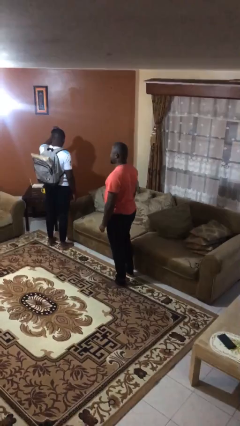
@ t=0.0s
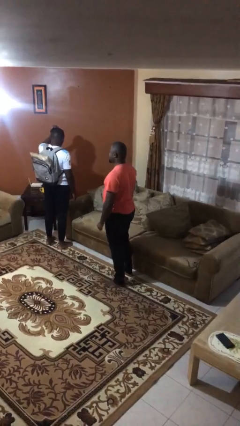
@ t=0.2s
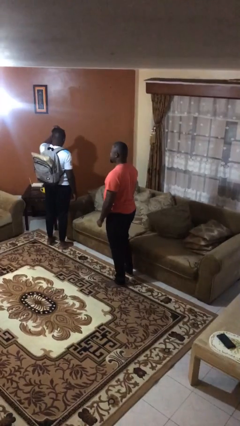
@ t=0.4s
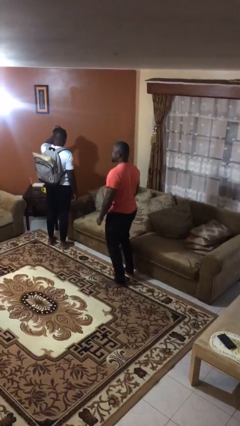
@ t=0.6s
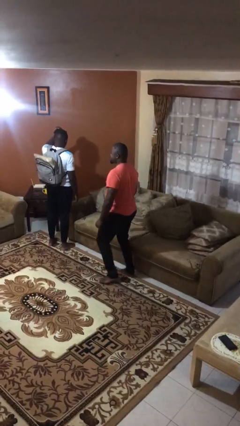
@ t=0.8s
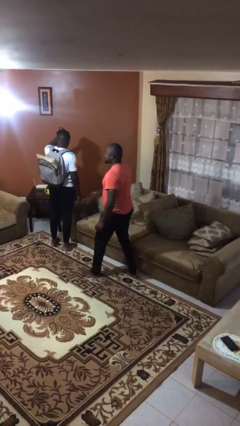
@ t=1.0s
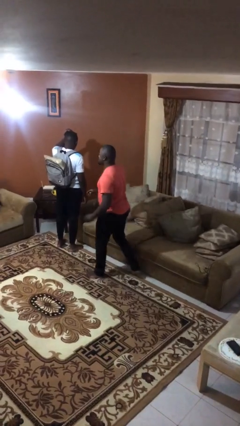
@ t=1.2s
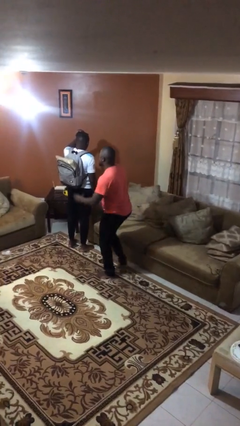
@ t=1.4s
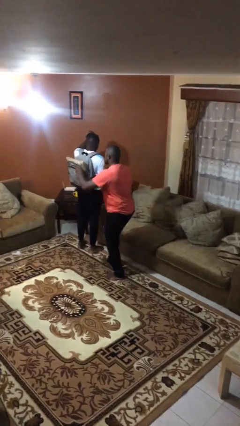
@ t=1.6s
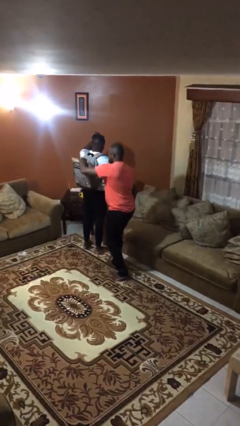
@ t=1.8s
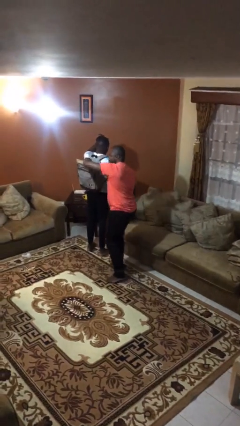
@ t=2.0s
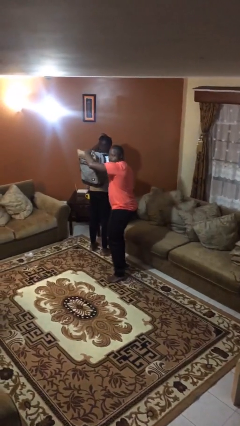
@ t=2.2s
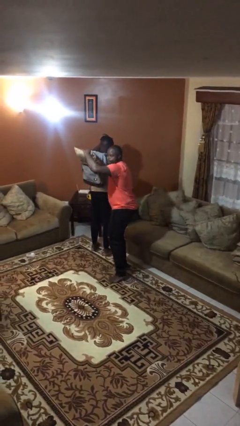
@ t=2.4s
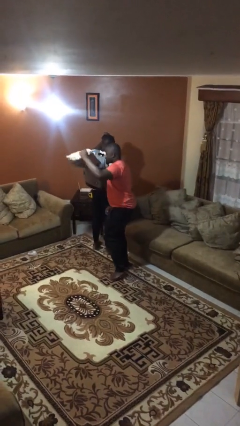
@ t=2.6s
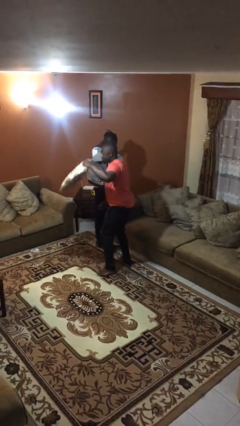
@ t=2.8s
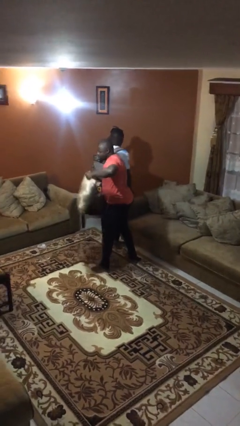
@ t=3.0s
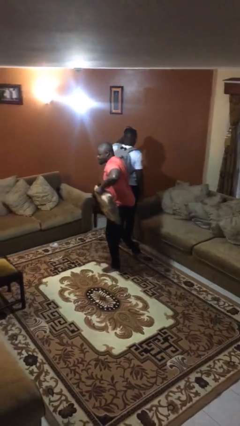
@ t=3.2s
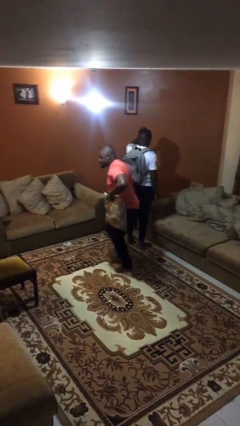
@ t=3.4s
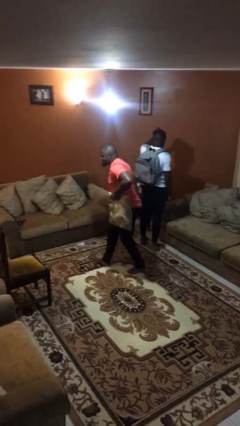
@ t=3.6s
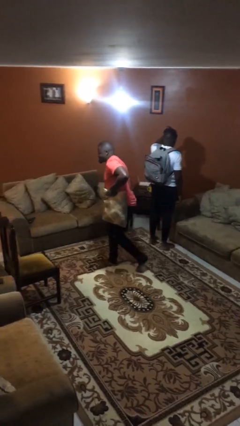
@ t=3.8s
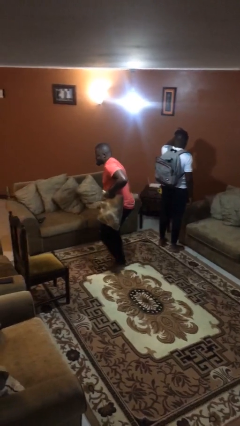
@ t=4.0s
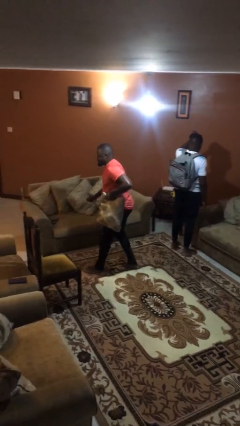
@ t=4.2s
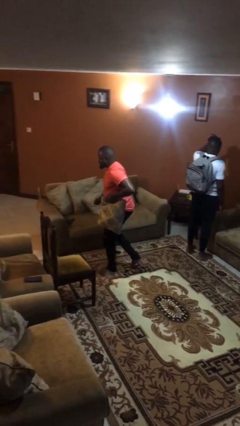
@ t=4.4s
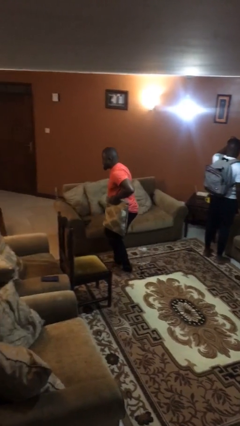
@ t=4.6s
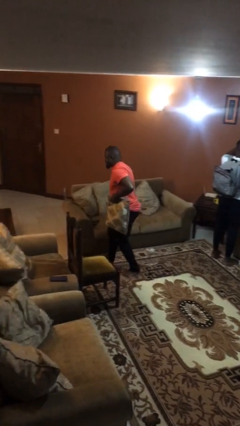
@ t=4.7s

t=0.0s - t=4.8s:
person steals object from person

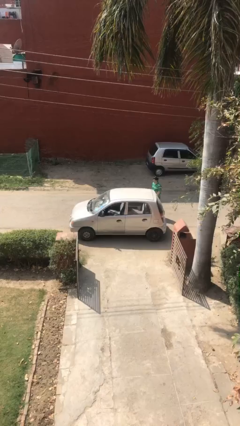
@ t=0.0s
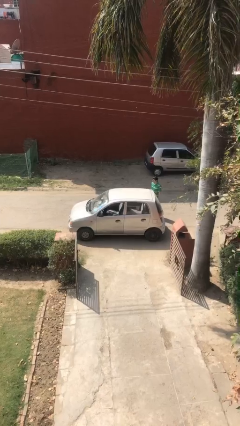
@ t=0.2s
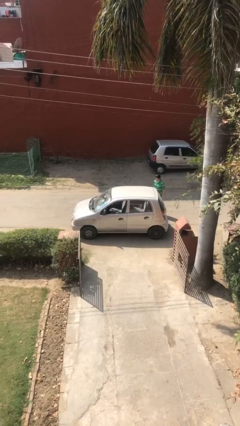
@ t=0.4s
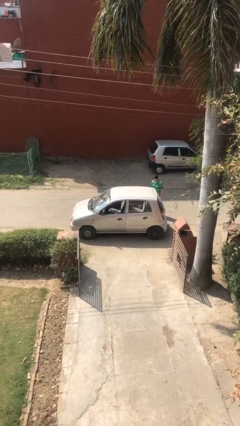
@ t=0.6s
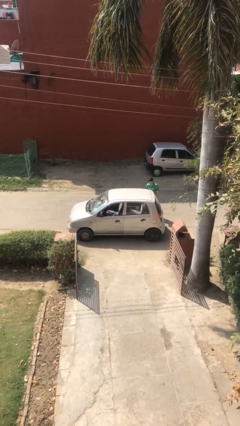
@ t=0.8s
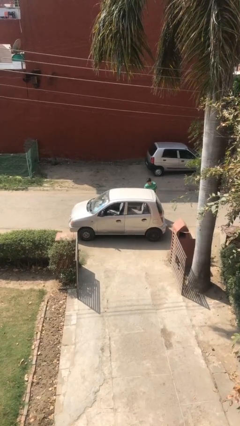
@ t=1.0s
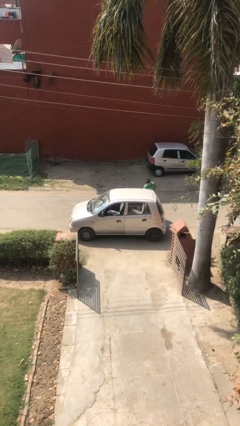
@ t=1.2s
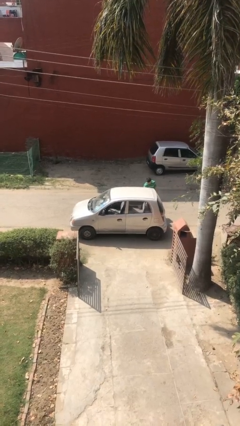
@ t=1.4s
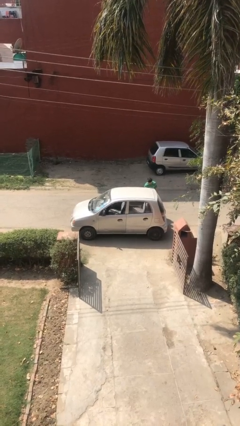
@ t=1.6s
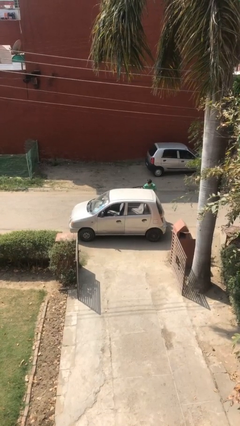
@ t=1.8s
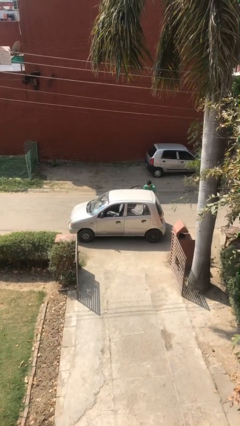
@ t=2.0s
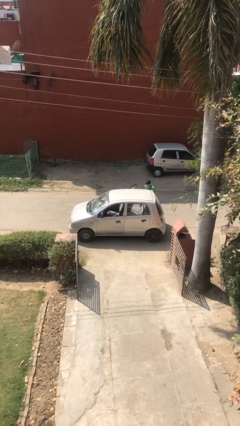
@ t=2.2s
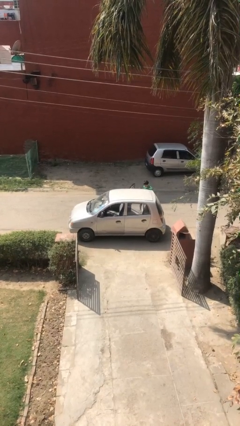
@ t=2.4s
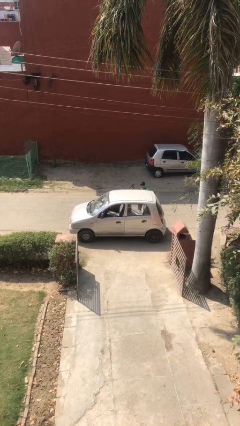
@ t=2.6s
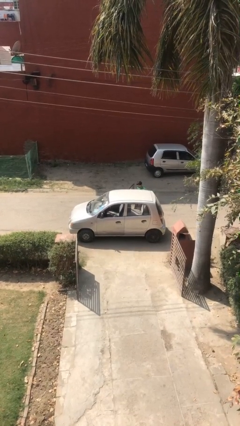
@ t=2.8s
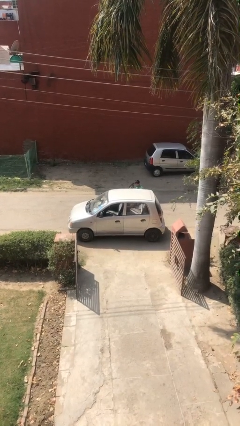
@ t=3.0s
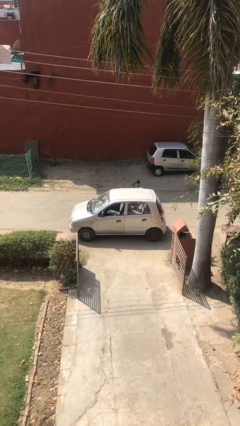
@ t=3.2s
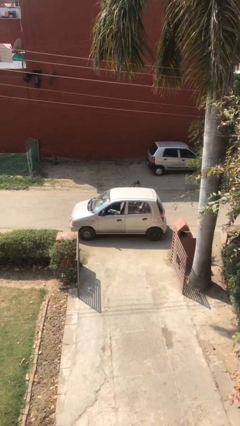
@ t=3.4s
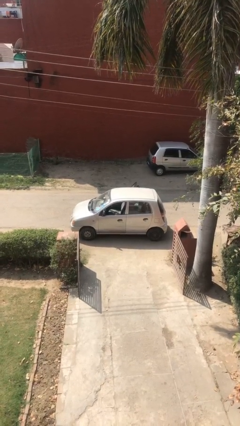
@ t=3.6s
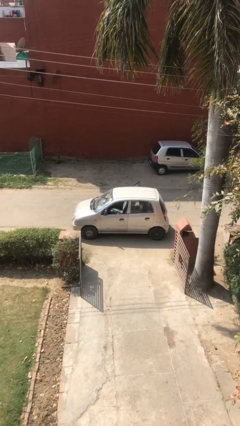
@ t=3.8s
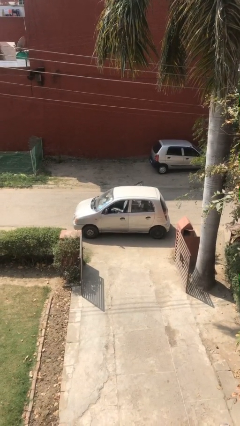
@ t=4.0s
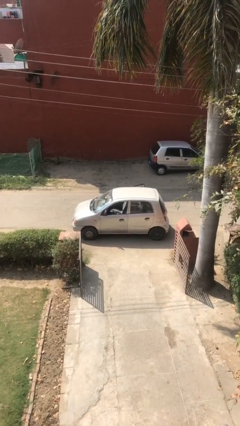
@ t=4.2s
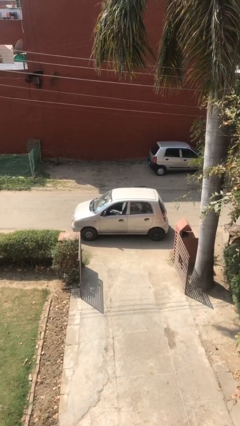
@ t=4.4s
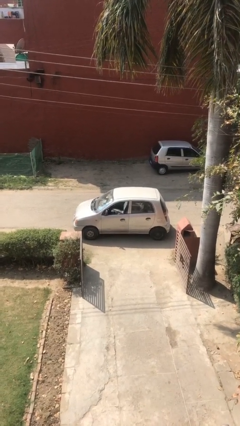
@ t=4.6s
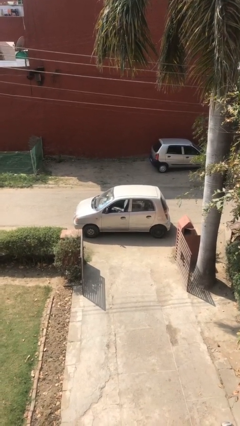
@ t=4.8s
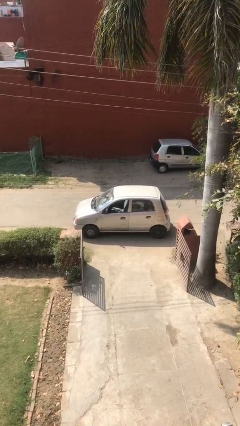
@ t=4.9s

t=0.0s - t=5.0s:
car picks up person

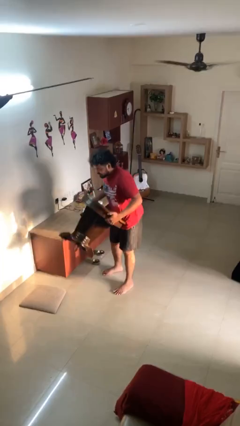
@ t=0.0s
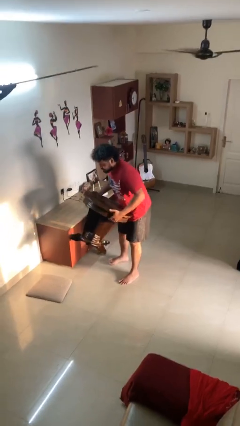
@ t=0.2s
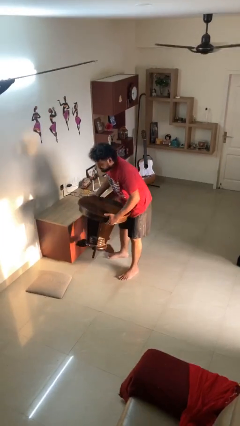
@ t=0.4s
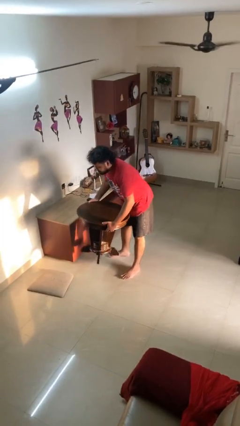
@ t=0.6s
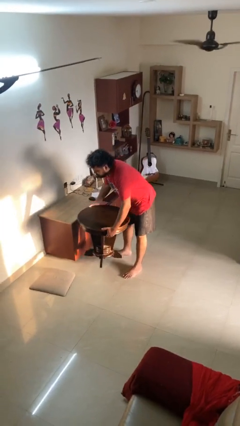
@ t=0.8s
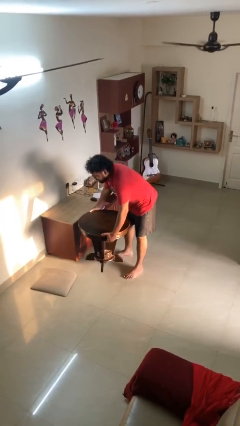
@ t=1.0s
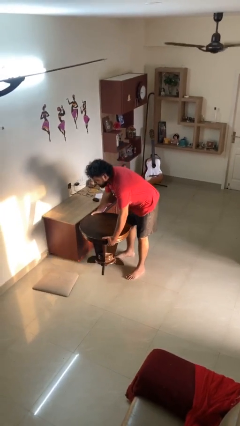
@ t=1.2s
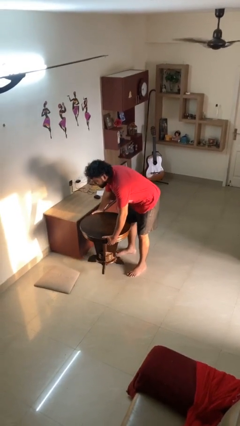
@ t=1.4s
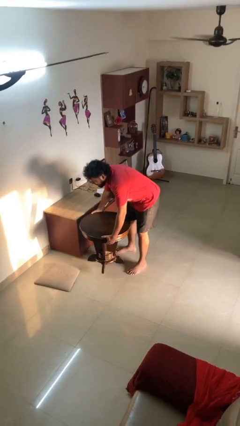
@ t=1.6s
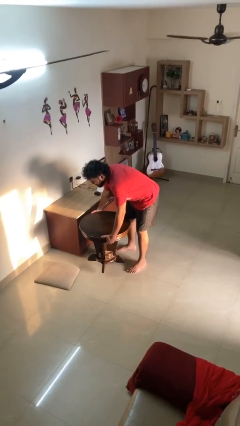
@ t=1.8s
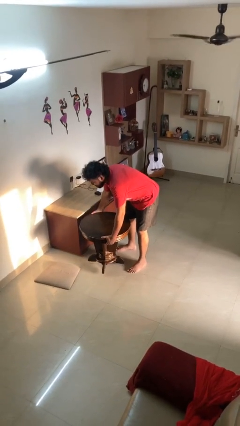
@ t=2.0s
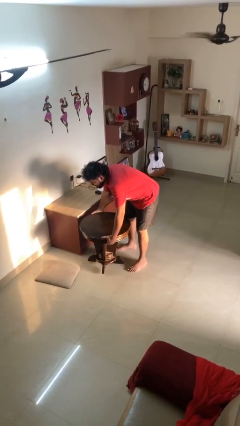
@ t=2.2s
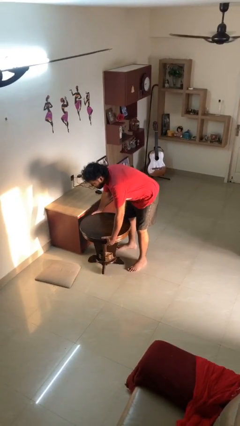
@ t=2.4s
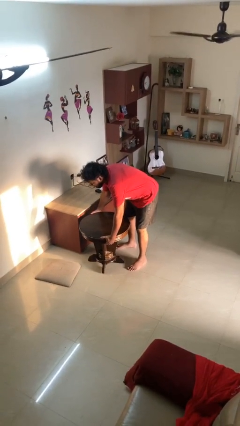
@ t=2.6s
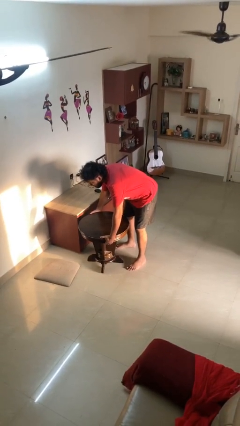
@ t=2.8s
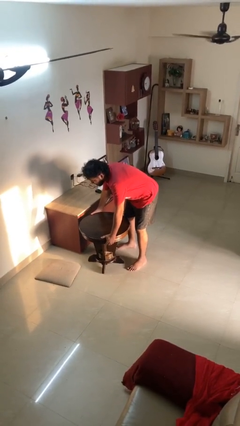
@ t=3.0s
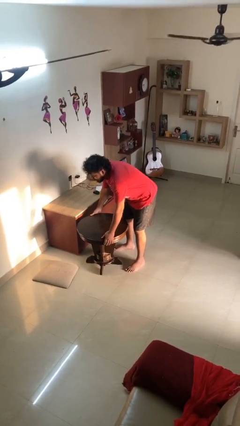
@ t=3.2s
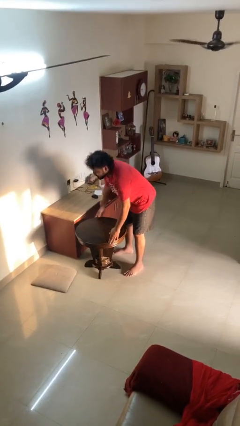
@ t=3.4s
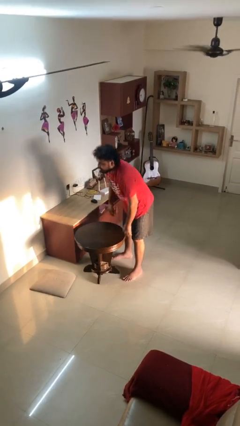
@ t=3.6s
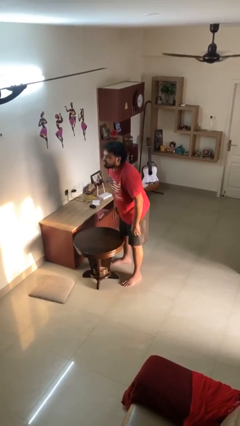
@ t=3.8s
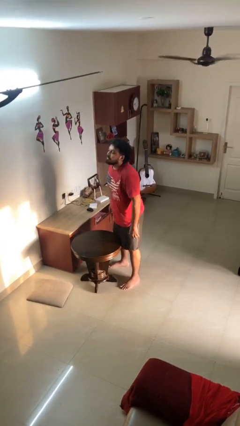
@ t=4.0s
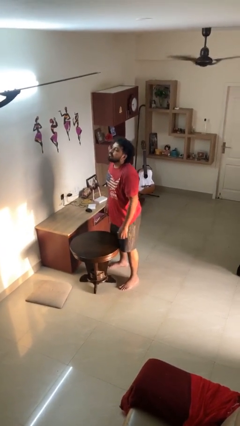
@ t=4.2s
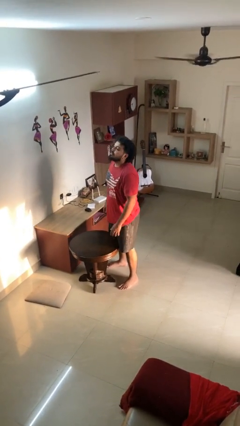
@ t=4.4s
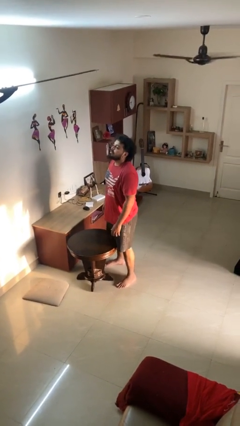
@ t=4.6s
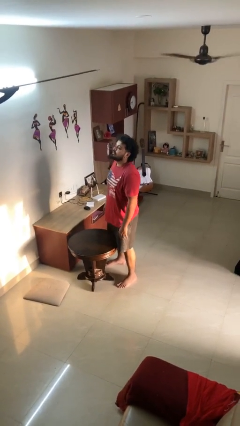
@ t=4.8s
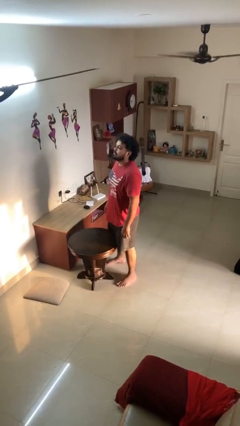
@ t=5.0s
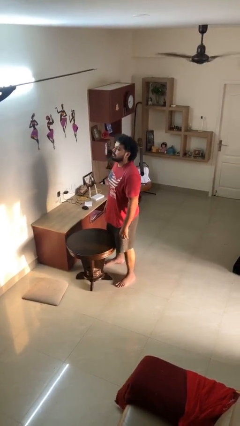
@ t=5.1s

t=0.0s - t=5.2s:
person puts down object on floor

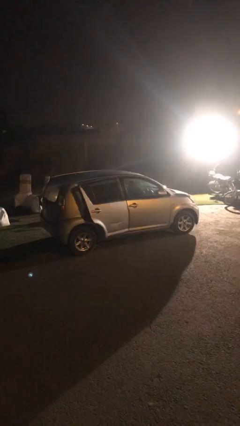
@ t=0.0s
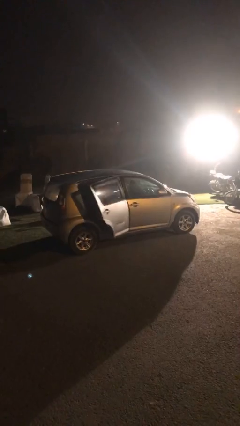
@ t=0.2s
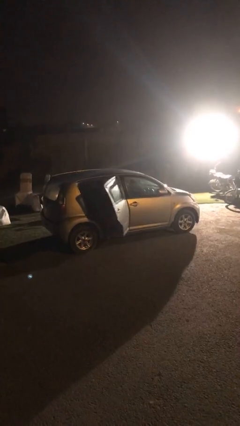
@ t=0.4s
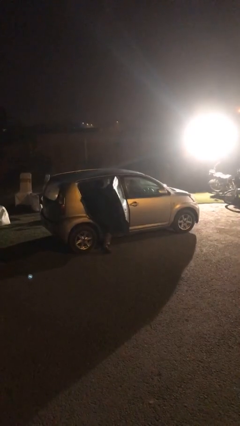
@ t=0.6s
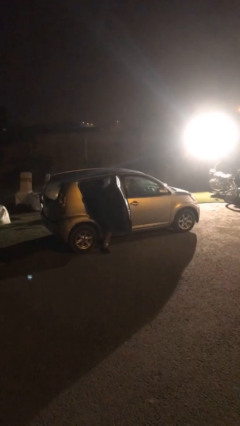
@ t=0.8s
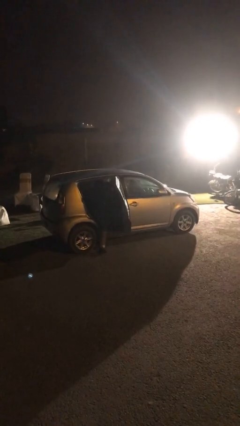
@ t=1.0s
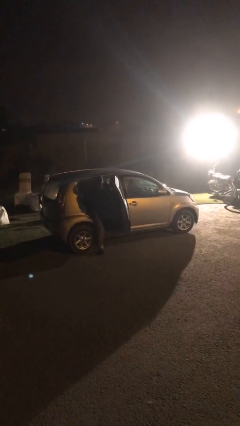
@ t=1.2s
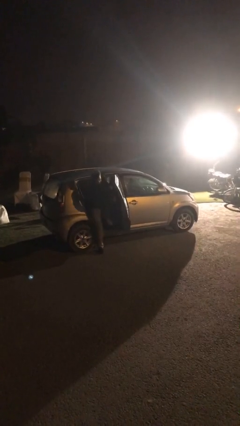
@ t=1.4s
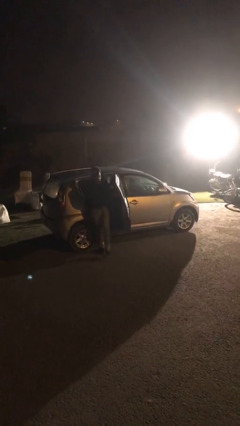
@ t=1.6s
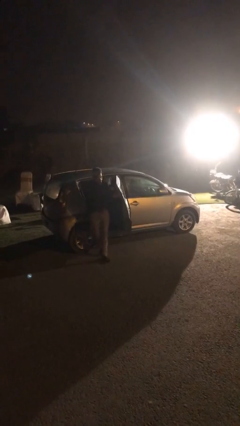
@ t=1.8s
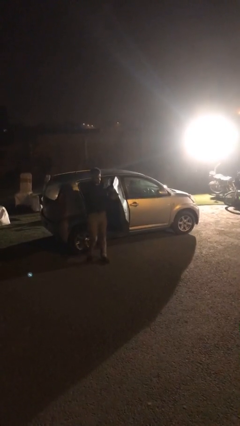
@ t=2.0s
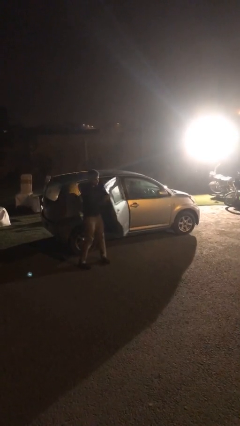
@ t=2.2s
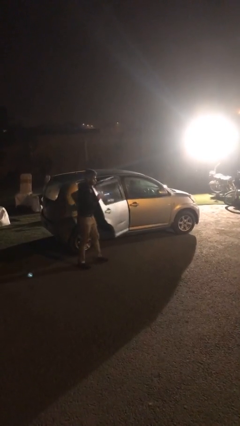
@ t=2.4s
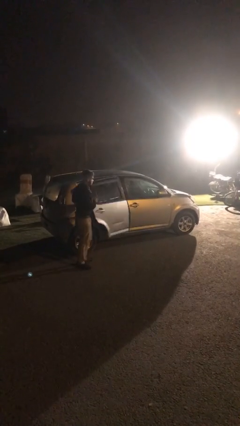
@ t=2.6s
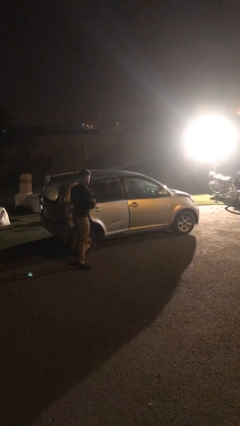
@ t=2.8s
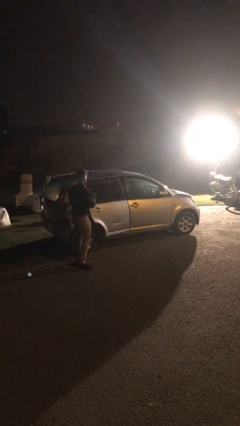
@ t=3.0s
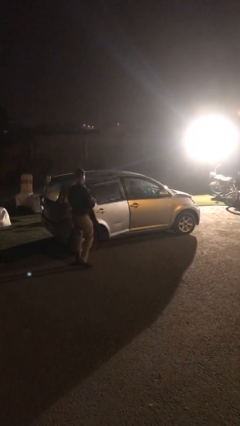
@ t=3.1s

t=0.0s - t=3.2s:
car drops off person
